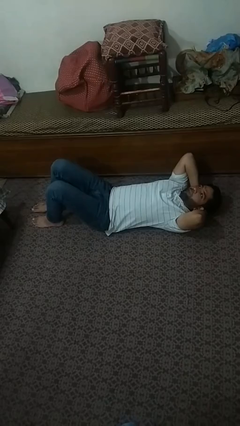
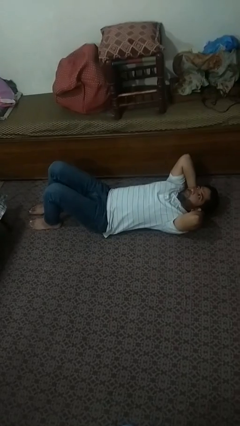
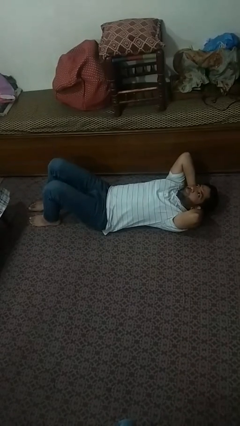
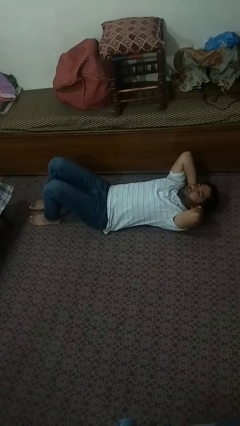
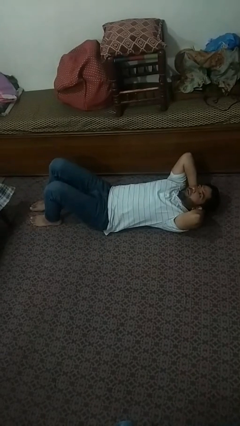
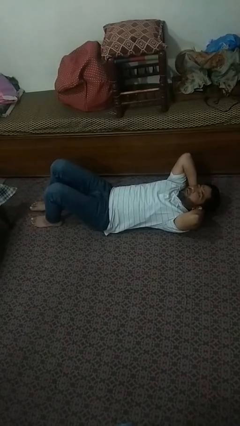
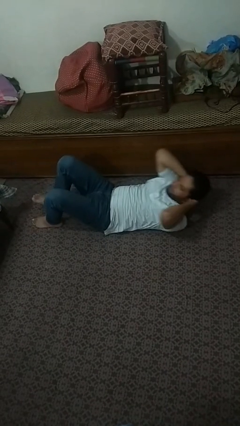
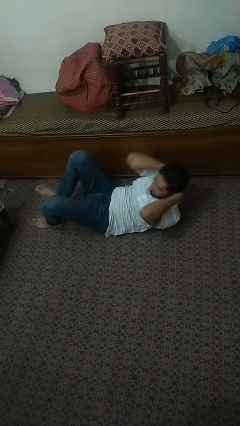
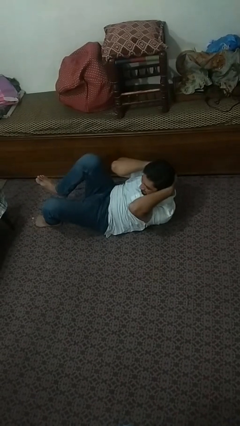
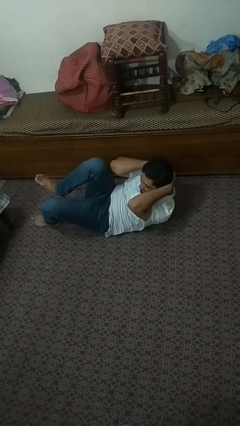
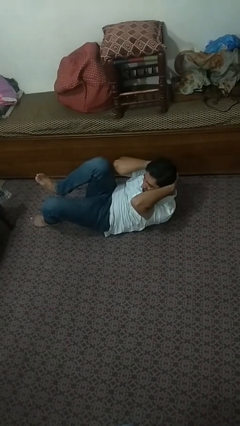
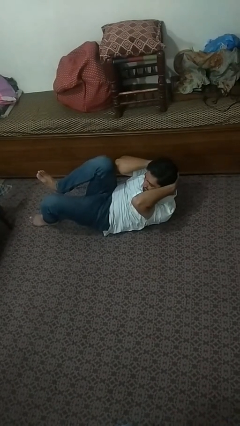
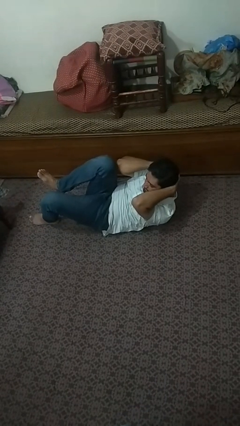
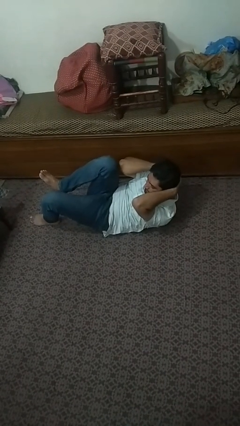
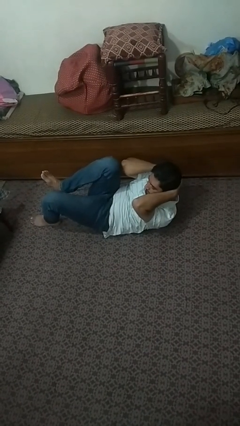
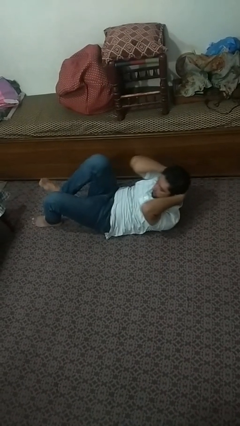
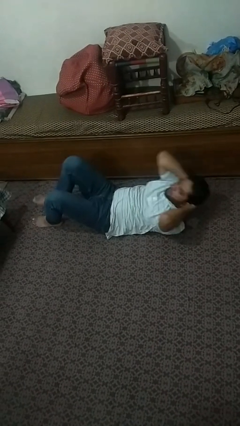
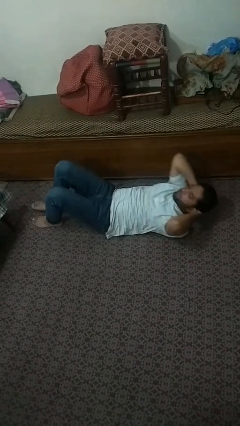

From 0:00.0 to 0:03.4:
person exercises with situp

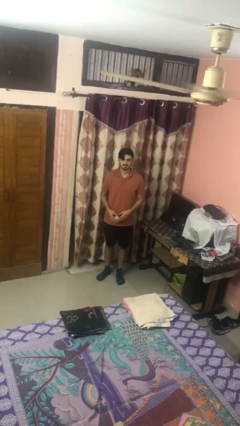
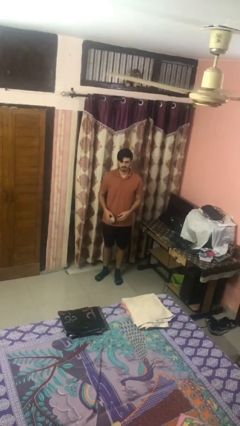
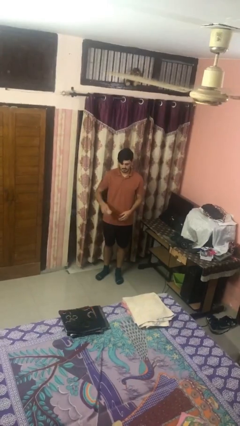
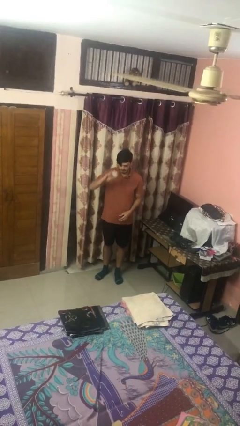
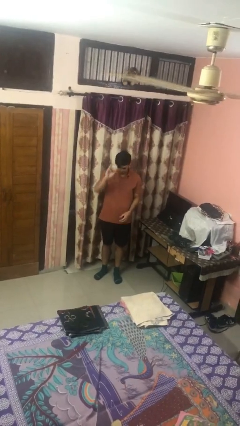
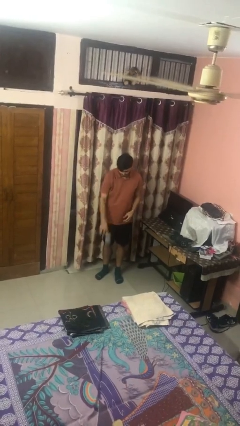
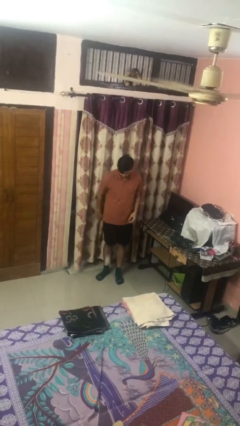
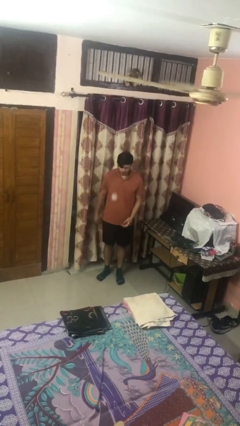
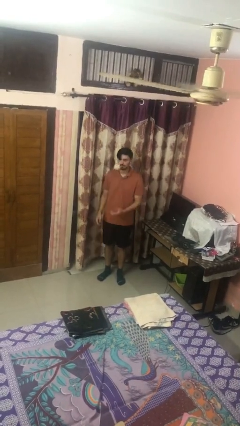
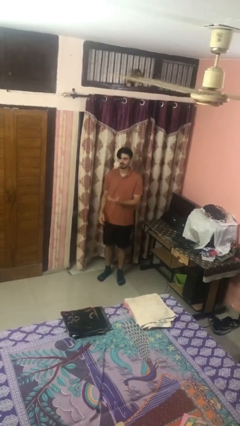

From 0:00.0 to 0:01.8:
person bounces ball on floor

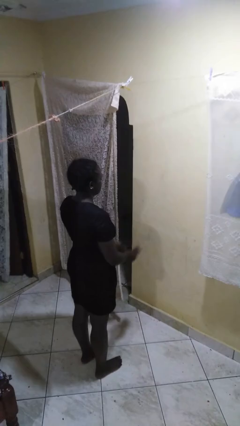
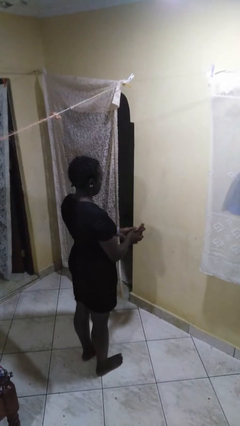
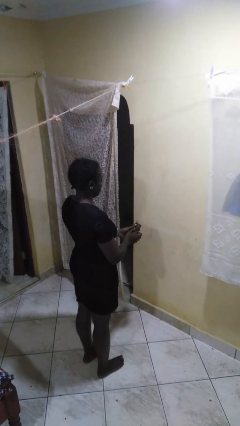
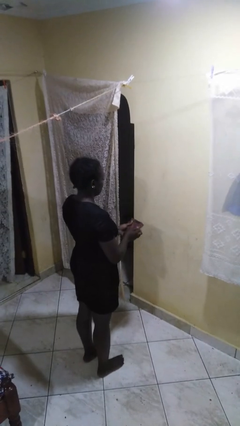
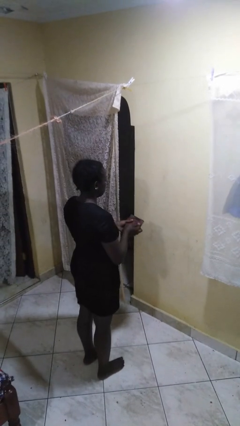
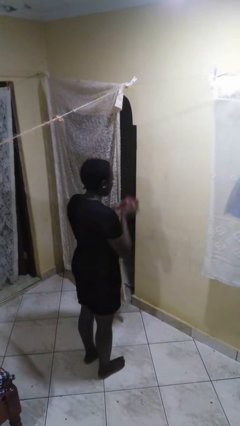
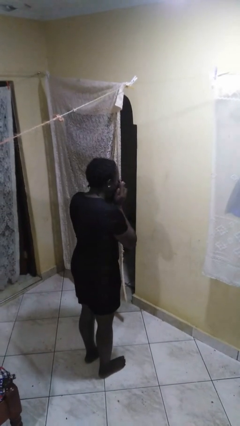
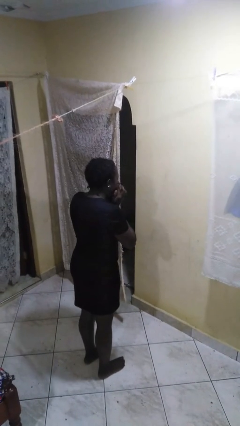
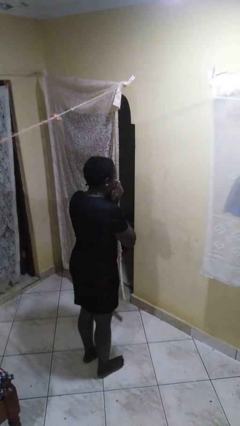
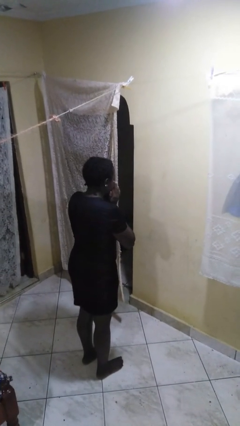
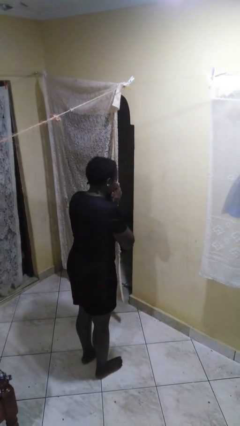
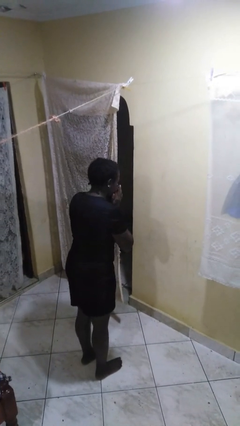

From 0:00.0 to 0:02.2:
person blows nose

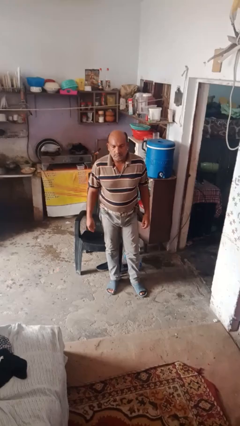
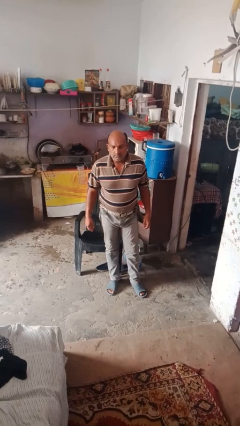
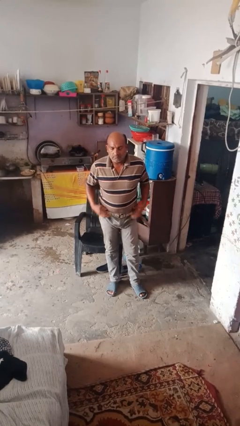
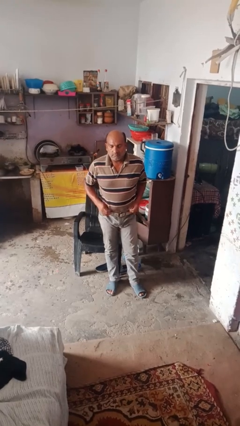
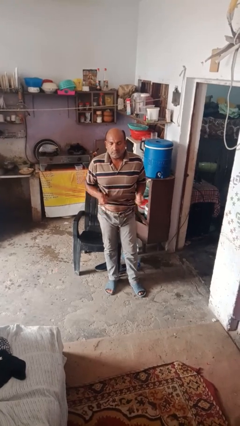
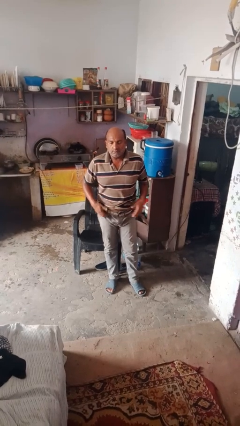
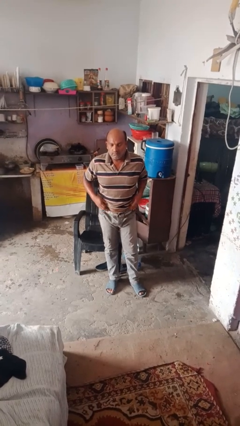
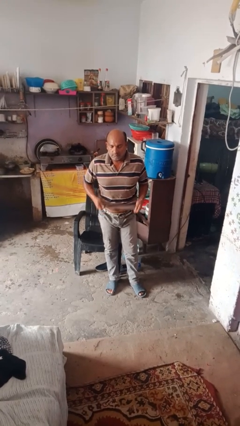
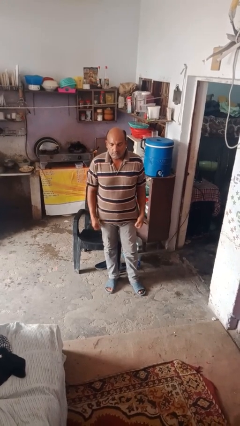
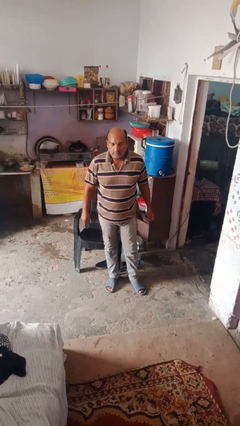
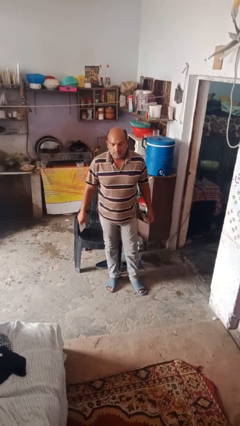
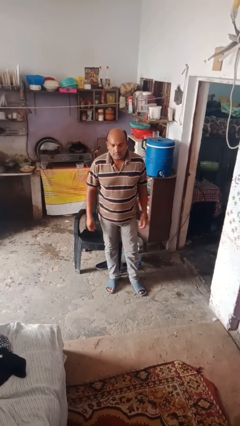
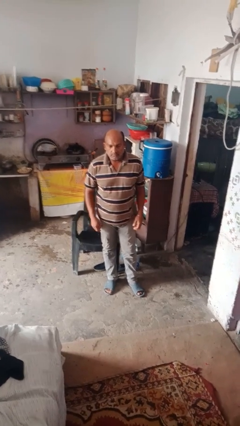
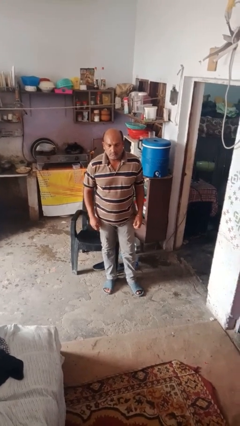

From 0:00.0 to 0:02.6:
person untucks shirt

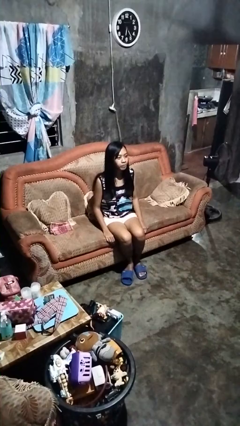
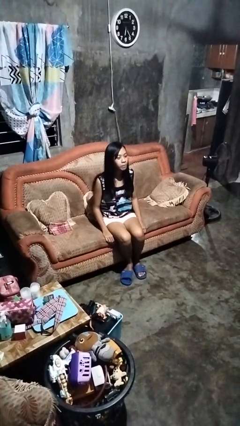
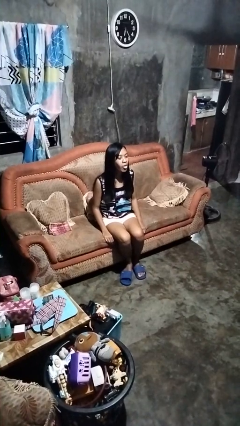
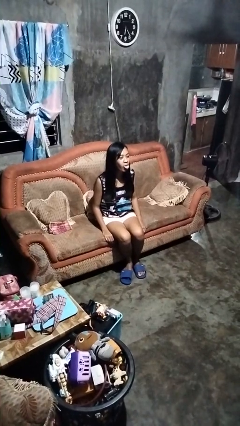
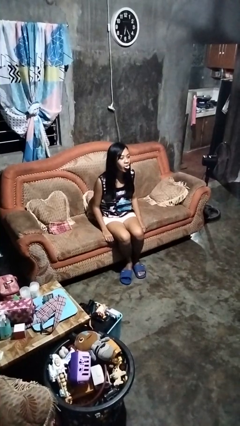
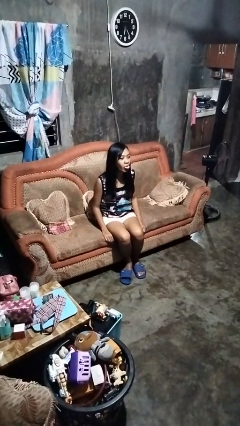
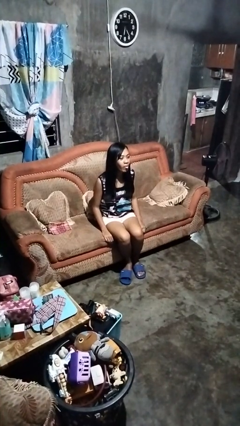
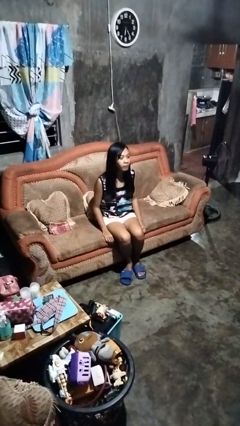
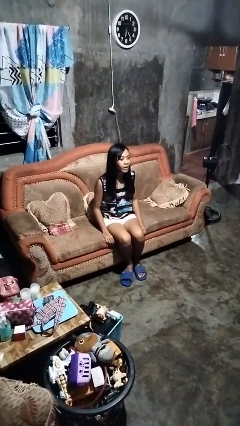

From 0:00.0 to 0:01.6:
person sticks out tongue

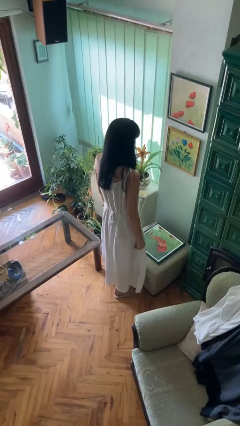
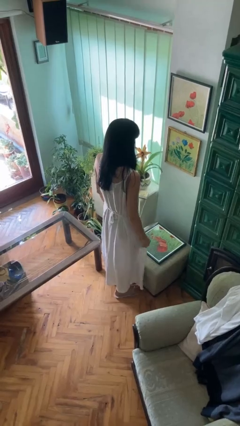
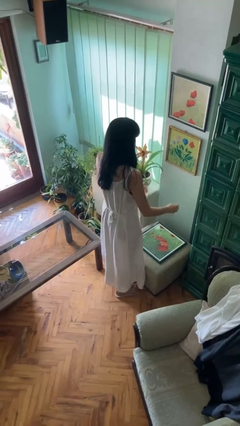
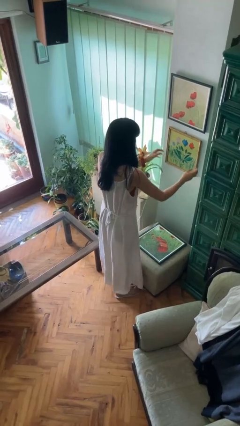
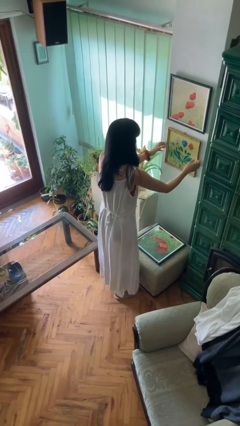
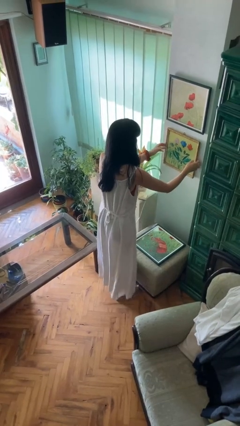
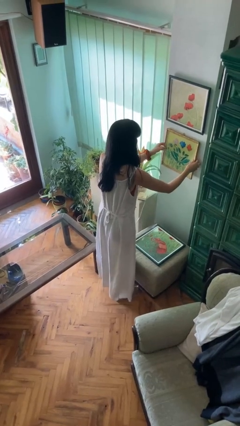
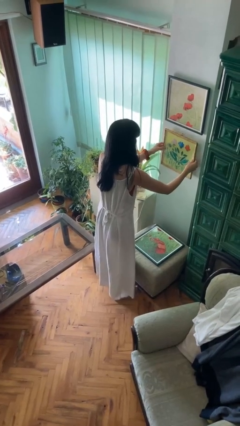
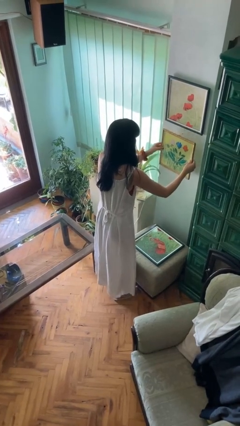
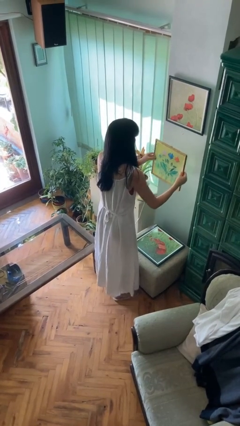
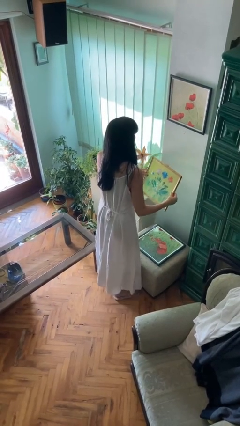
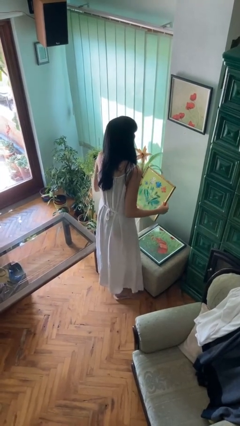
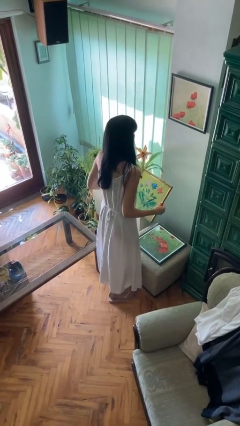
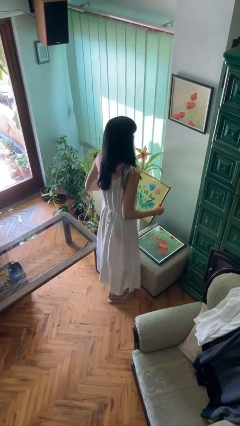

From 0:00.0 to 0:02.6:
person takes down picture frame

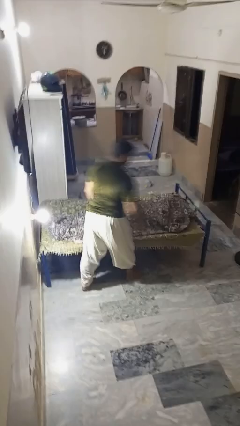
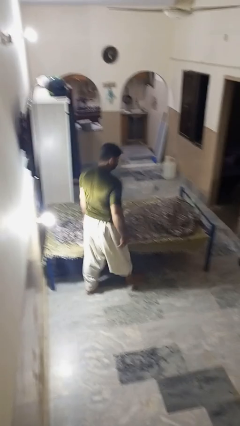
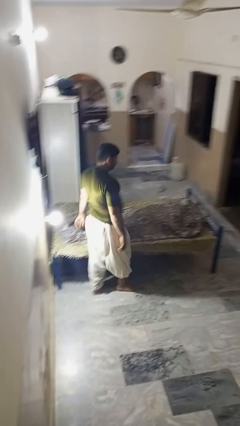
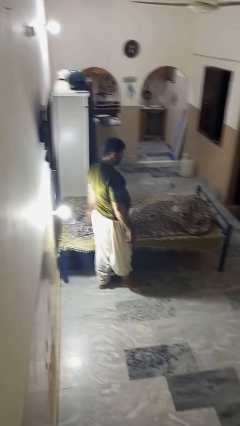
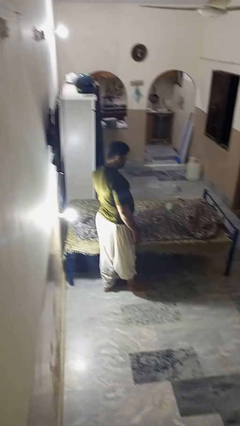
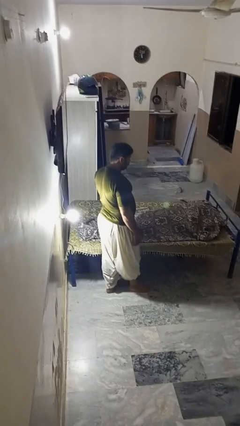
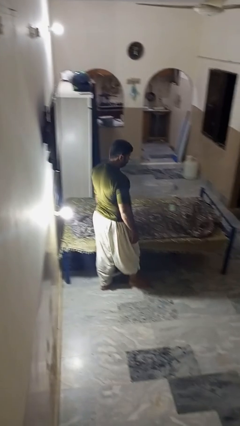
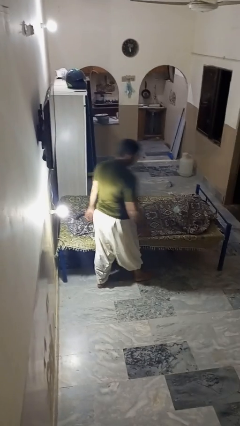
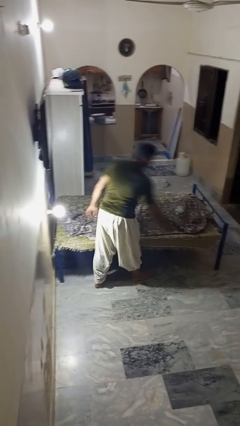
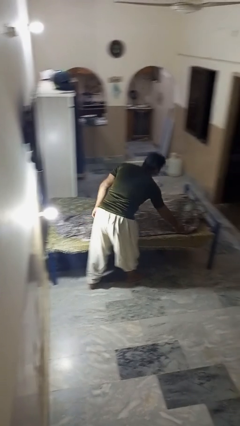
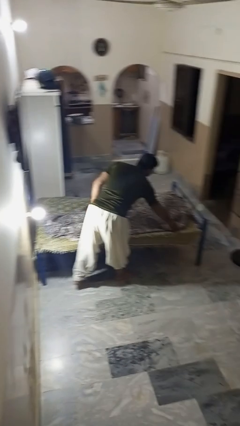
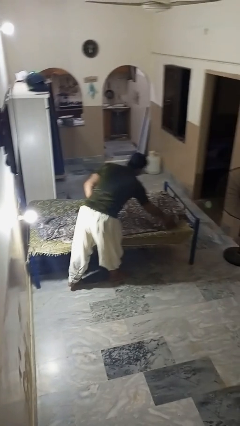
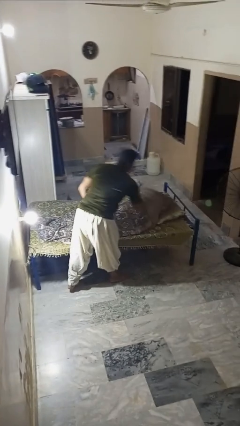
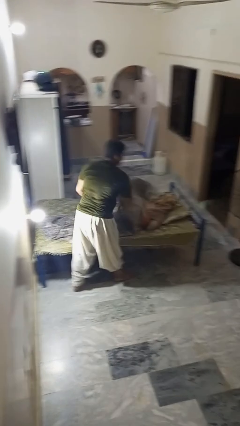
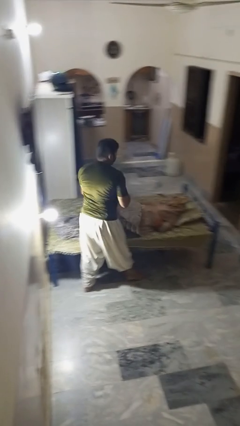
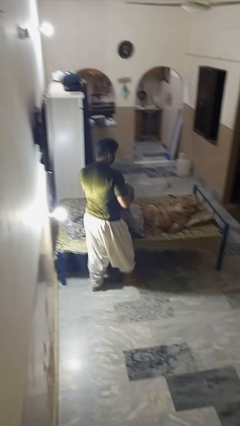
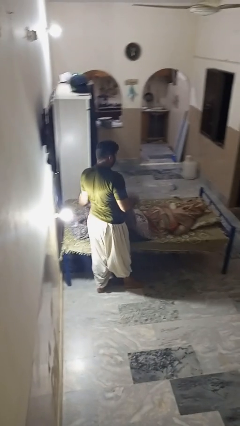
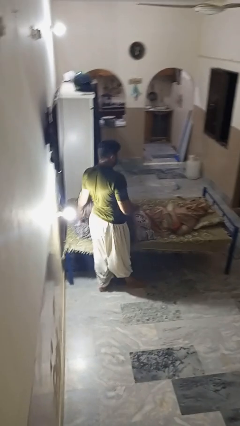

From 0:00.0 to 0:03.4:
person uncovers friend with blanket
